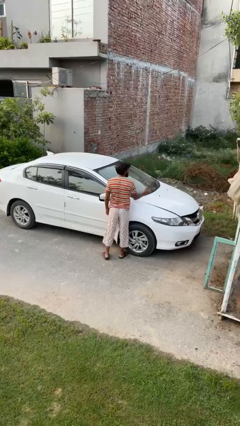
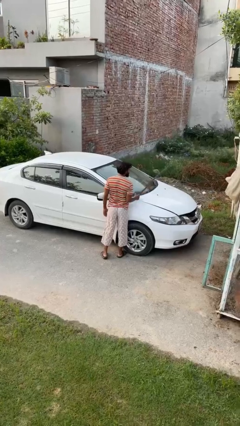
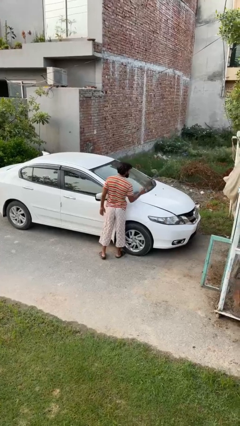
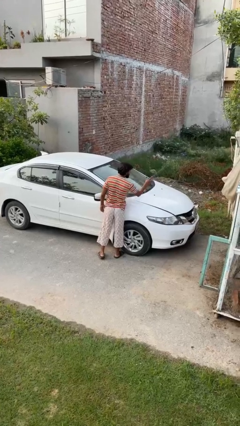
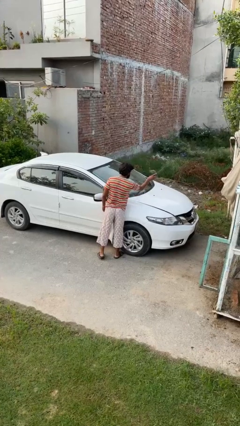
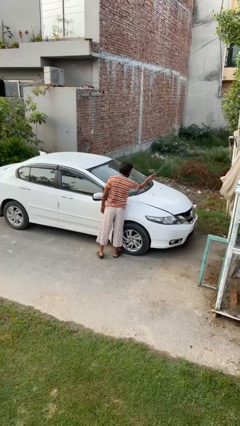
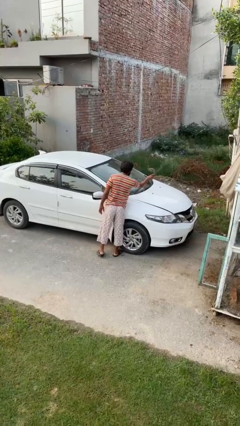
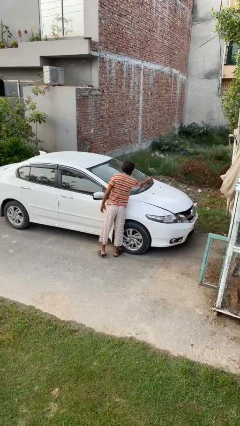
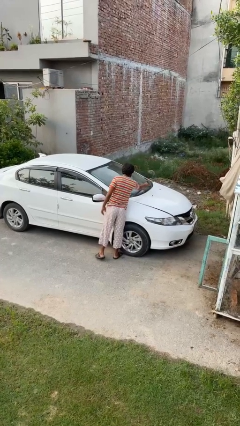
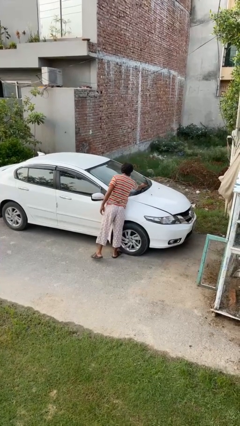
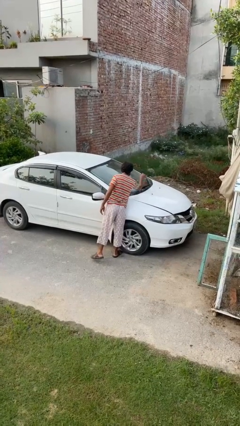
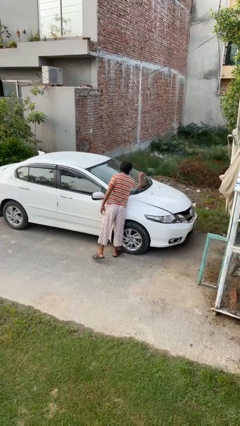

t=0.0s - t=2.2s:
person flips down car wipers

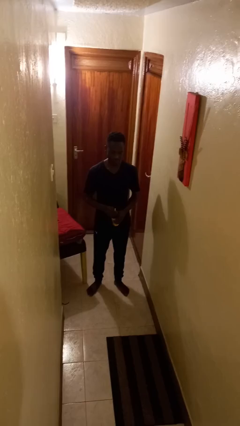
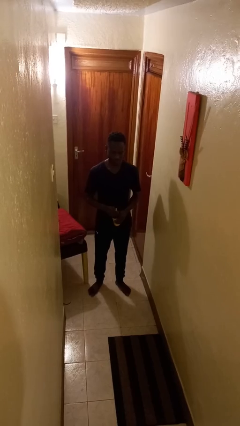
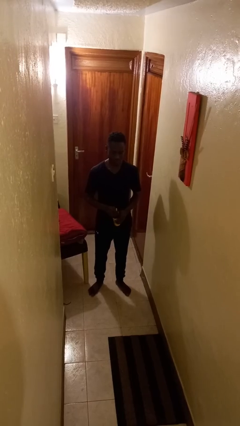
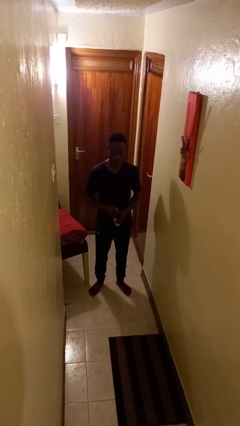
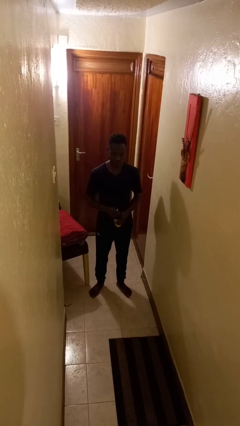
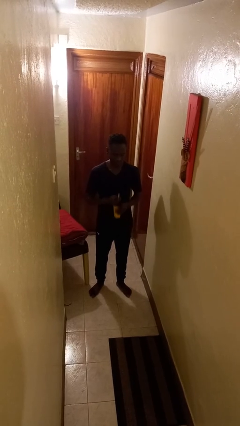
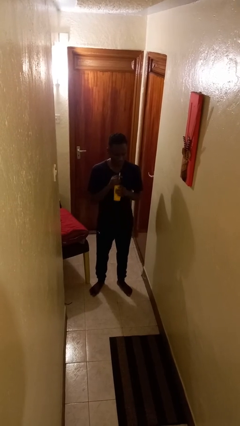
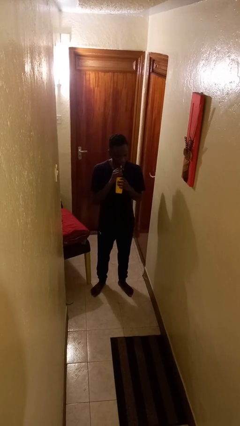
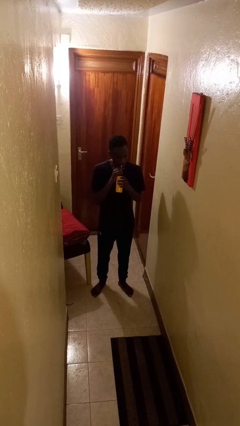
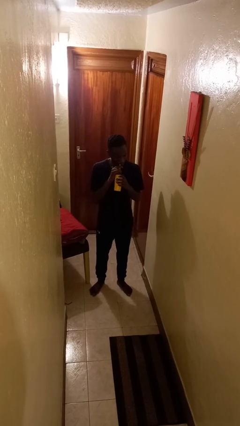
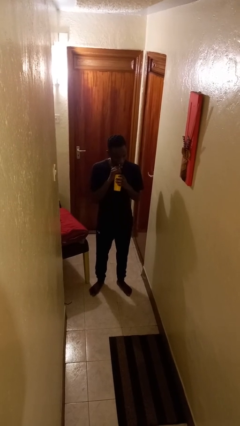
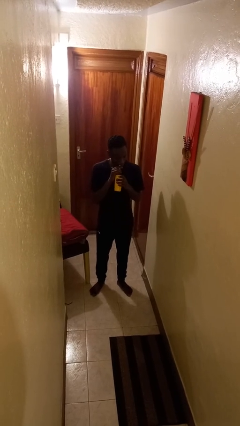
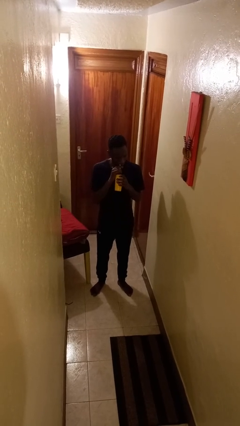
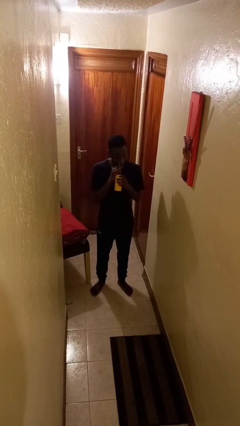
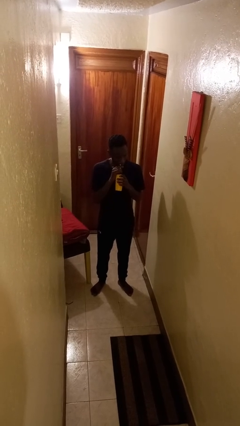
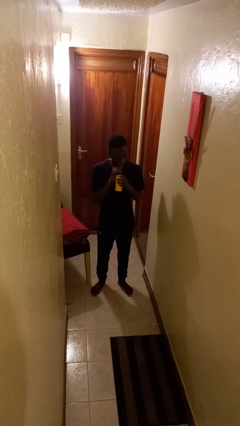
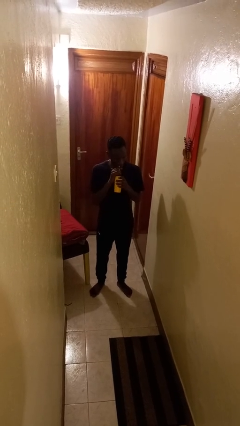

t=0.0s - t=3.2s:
person drinks from straw

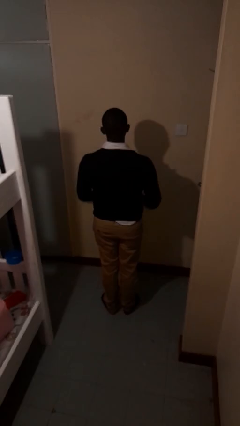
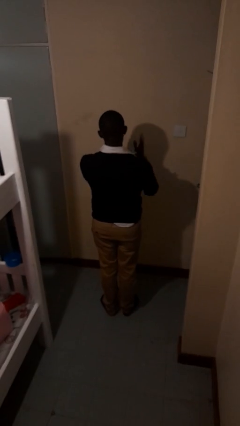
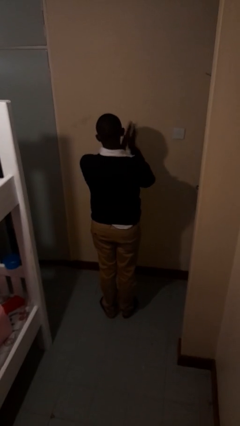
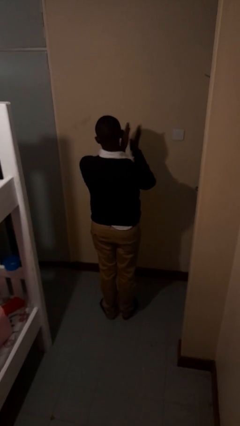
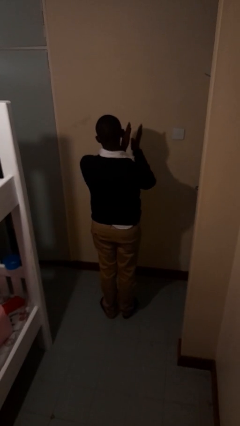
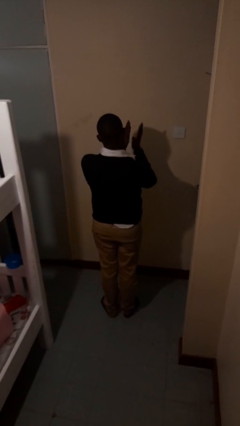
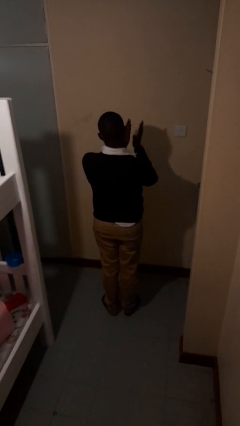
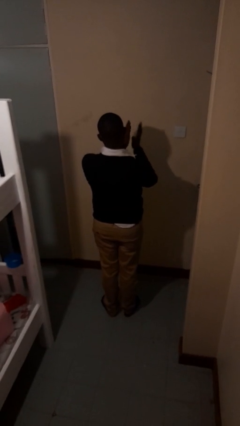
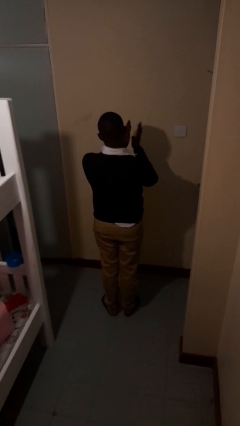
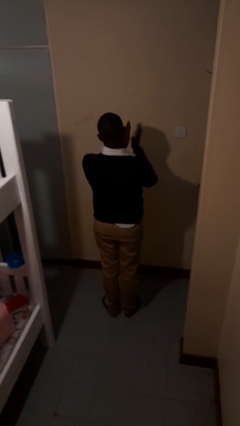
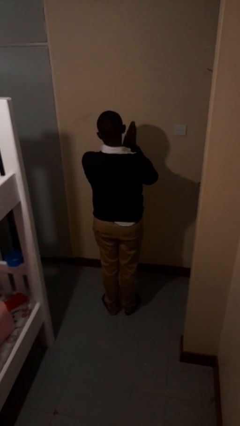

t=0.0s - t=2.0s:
person claps hands

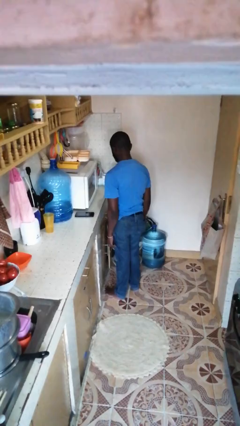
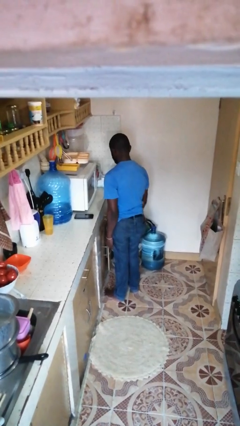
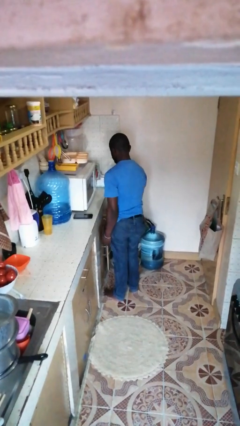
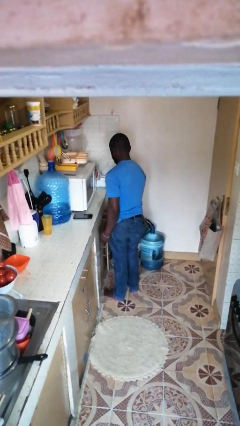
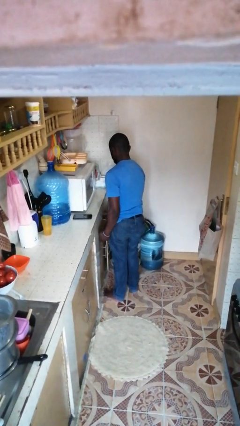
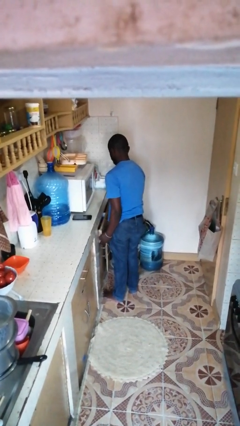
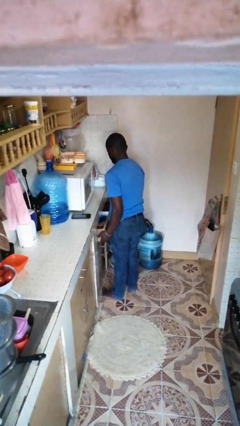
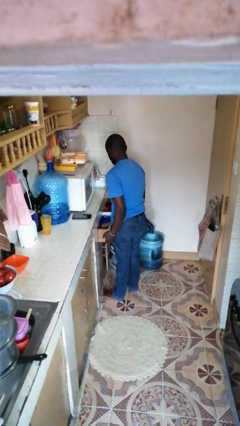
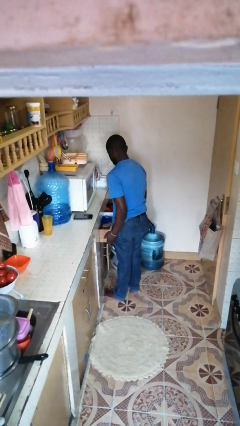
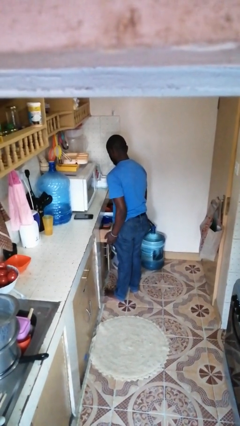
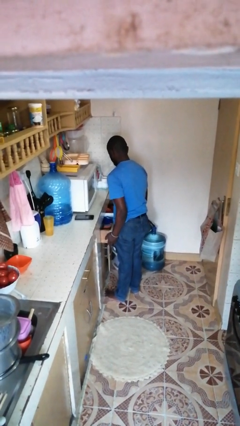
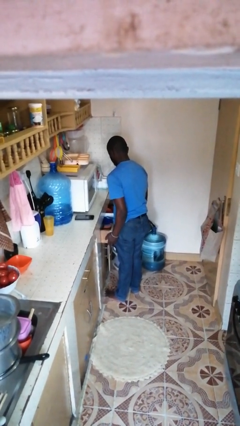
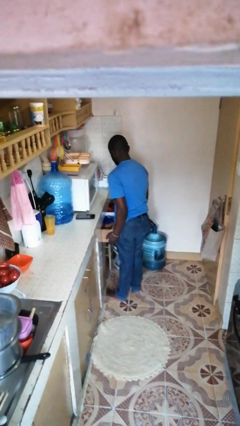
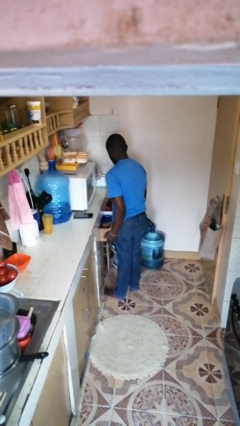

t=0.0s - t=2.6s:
person opens kitchen drawer

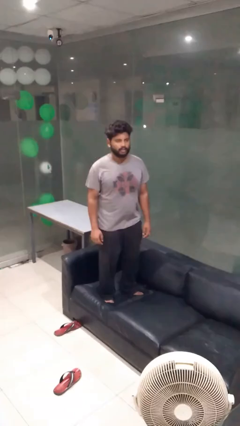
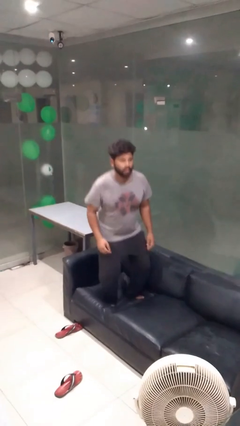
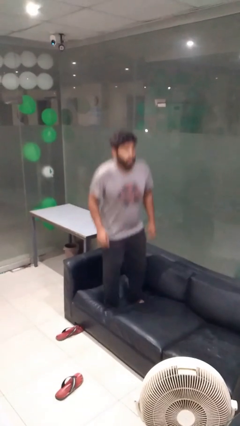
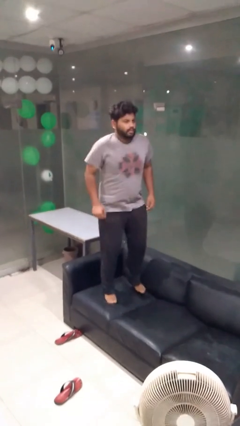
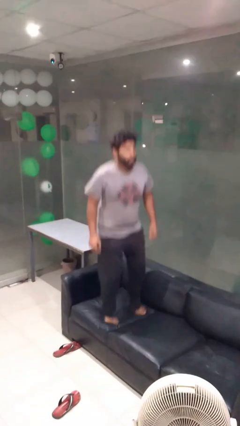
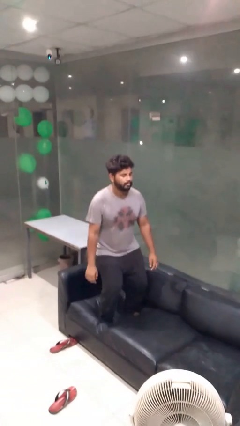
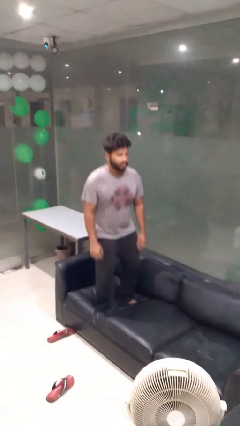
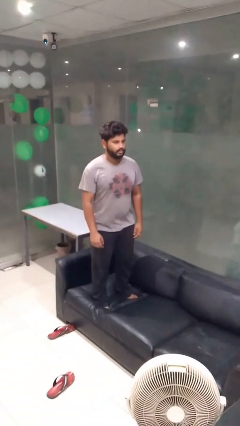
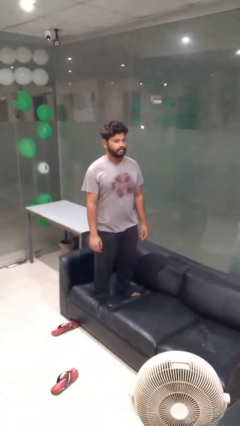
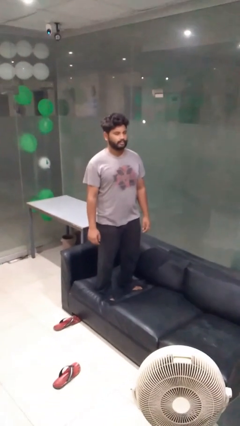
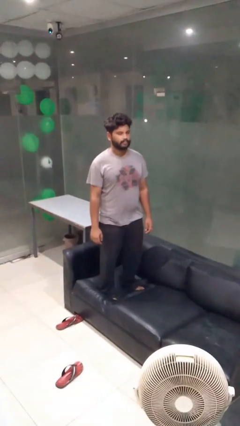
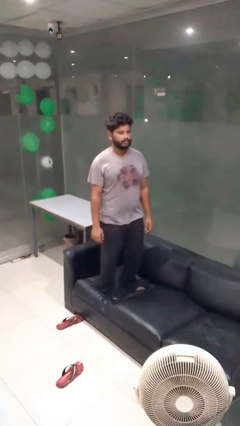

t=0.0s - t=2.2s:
person jumps on couch

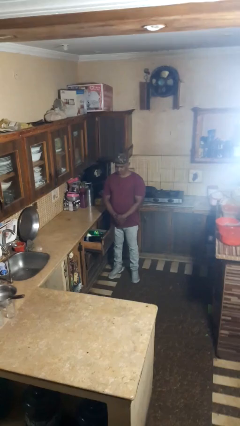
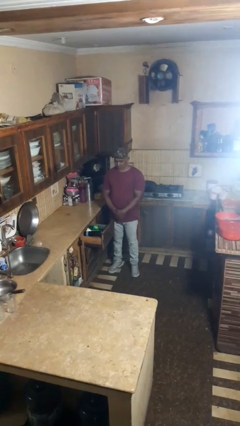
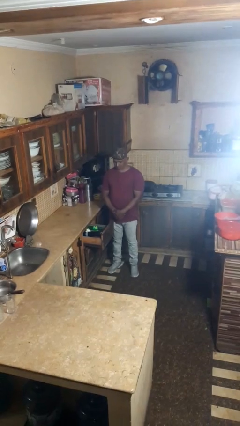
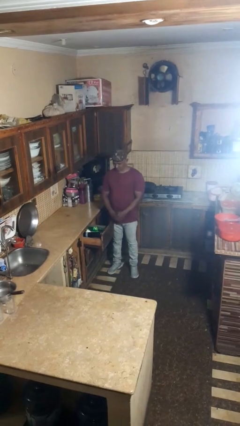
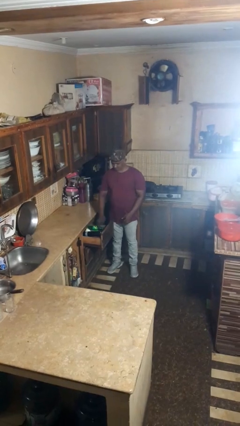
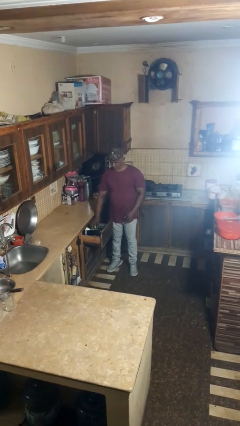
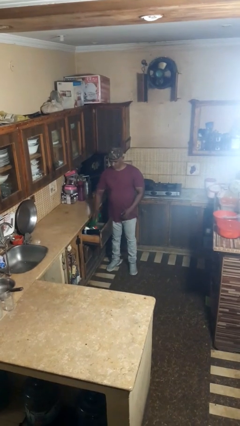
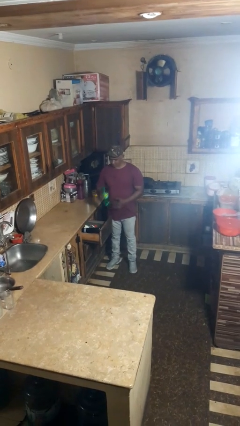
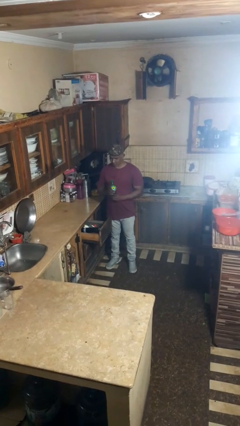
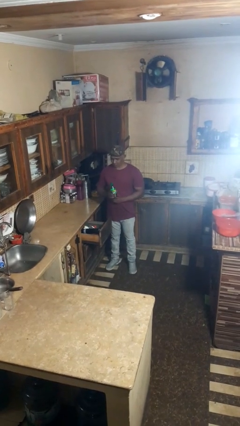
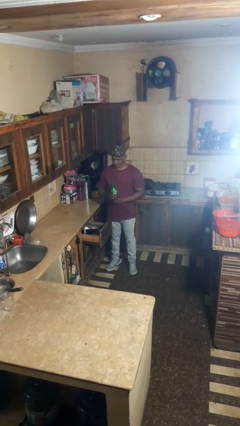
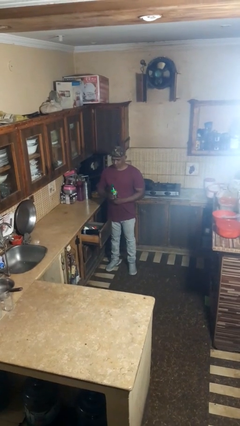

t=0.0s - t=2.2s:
person takes object from kitchen drawer

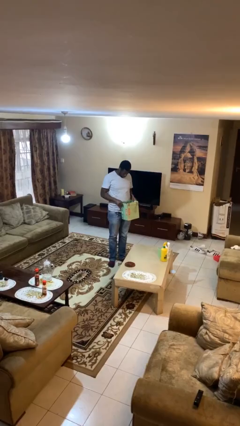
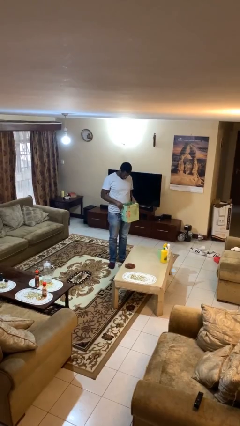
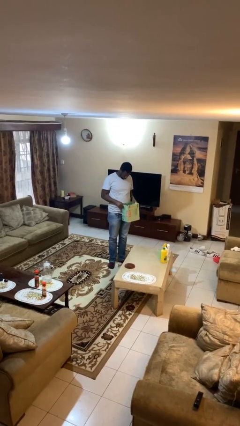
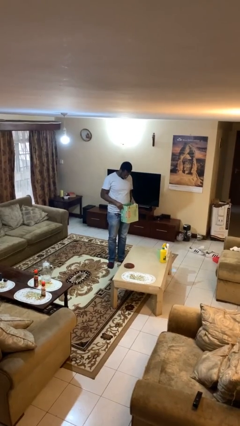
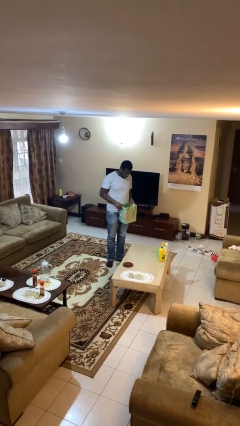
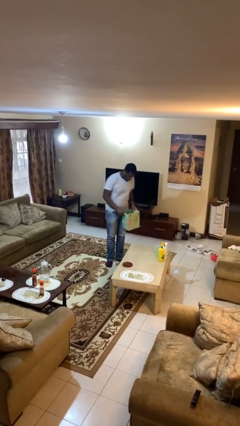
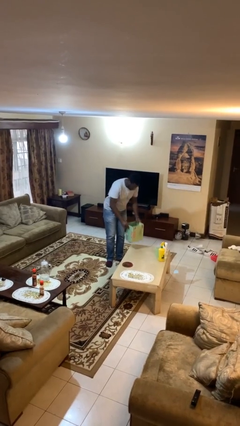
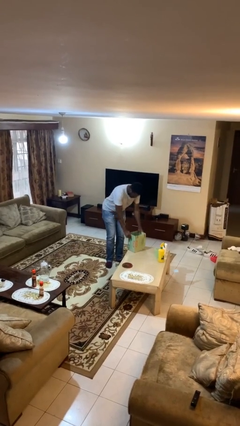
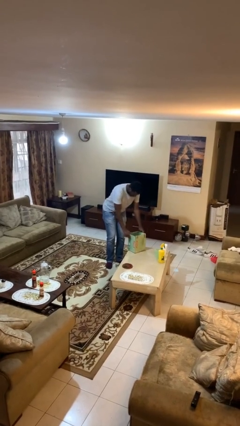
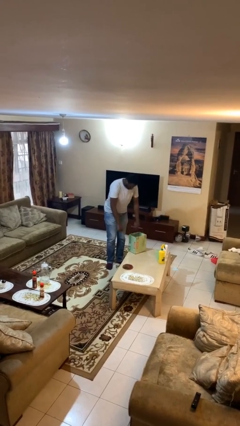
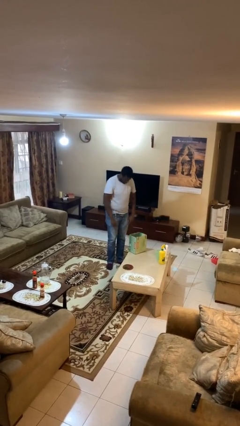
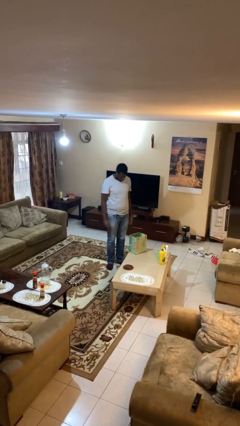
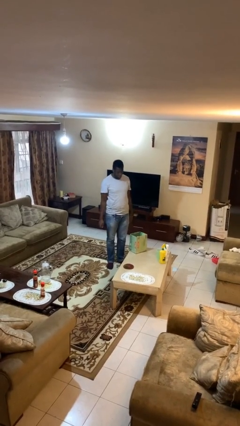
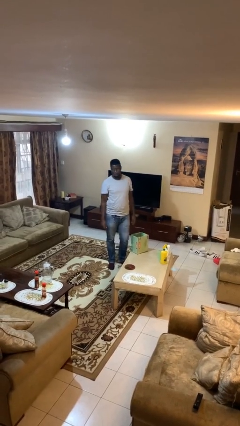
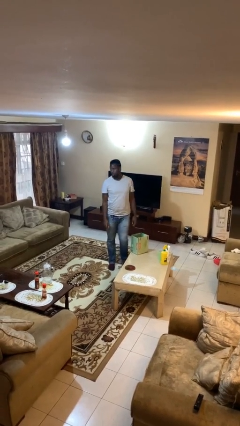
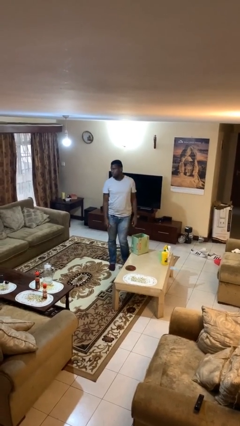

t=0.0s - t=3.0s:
person puts down object on table
